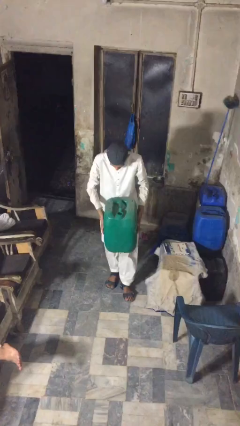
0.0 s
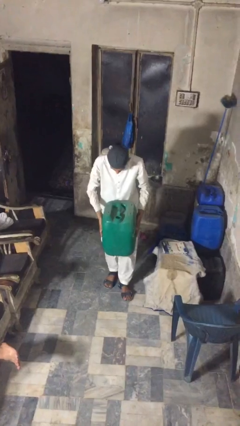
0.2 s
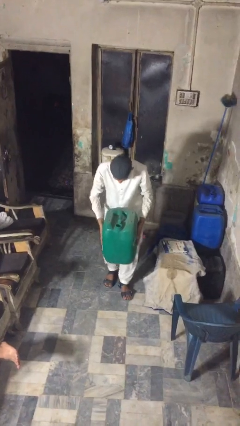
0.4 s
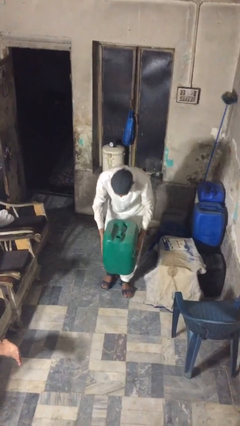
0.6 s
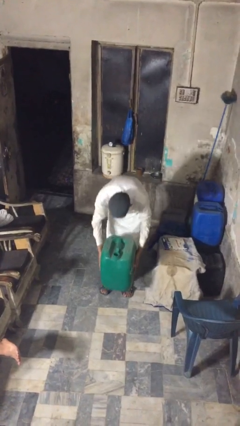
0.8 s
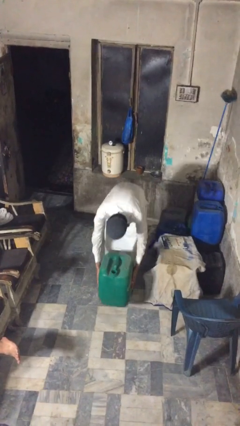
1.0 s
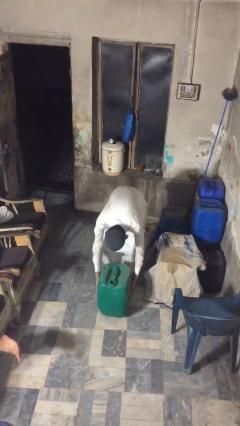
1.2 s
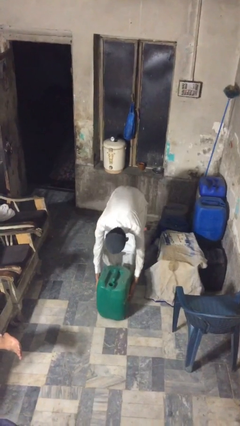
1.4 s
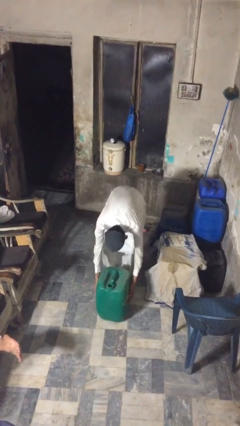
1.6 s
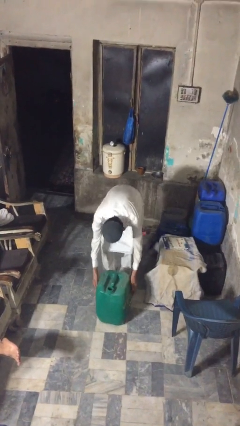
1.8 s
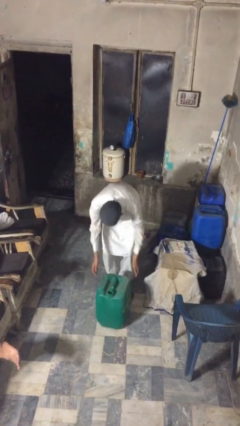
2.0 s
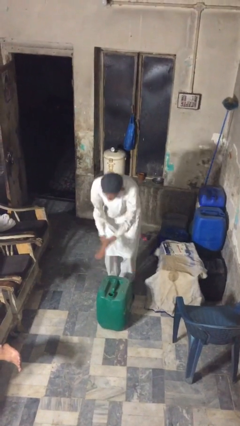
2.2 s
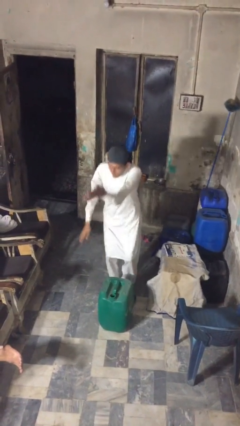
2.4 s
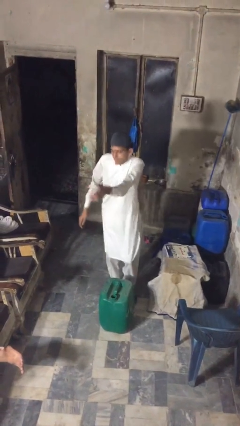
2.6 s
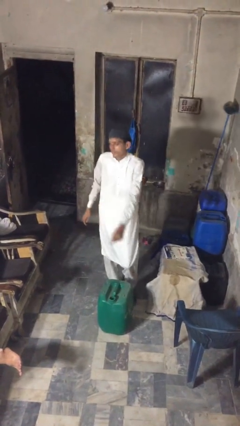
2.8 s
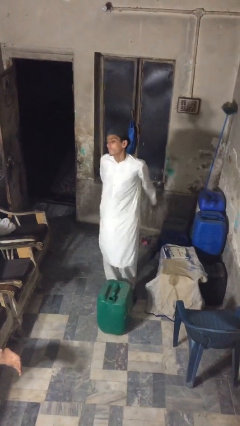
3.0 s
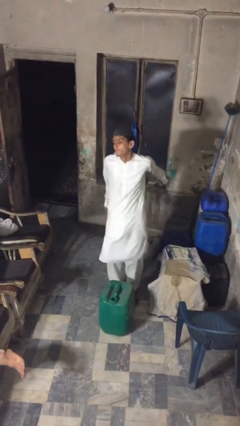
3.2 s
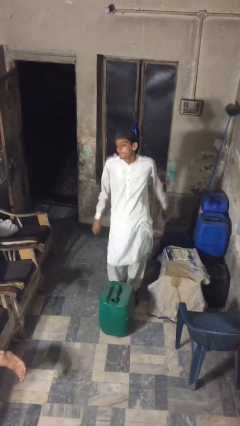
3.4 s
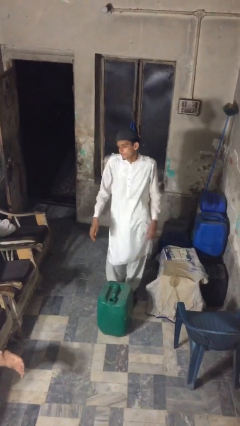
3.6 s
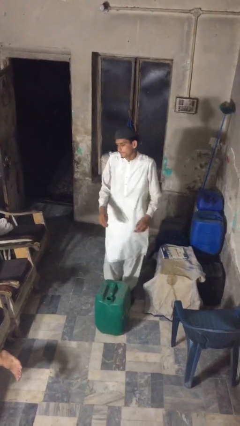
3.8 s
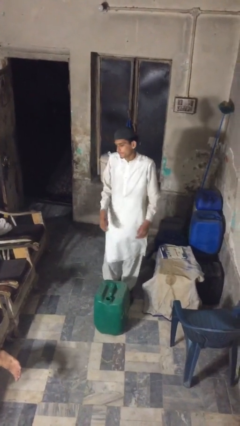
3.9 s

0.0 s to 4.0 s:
person puts down object on floor

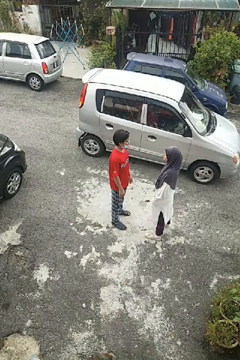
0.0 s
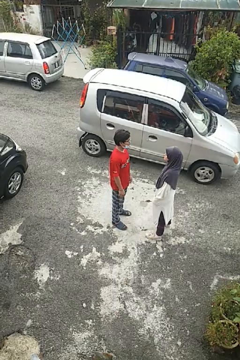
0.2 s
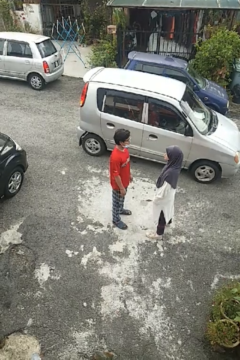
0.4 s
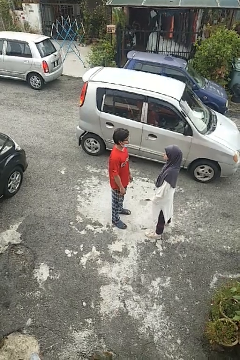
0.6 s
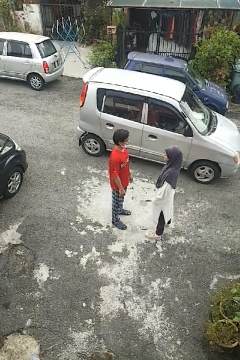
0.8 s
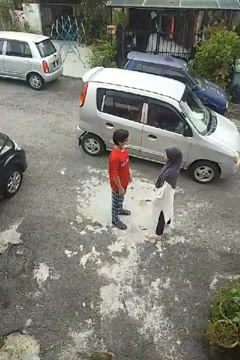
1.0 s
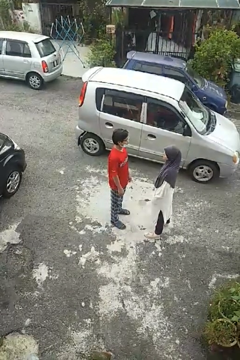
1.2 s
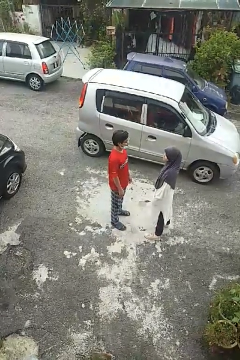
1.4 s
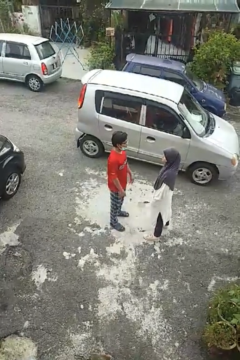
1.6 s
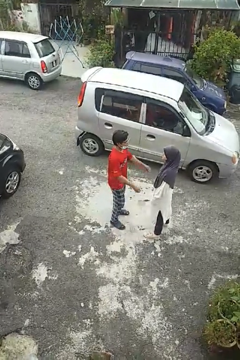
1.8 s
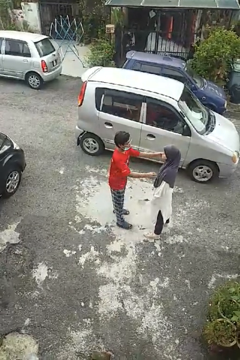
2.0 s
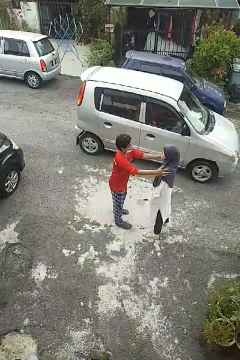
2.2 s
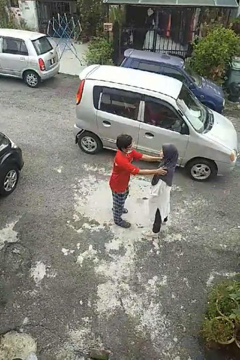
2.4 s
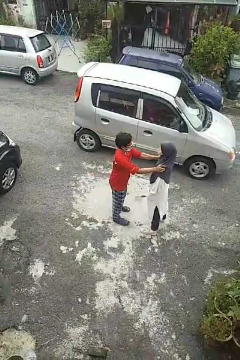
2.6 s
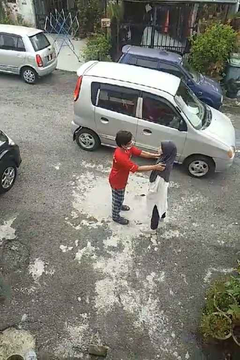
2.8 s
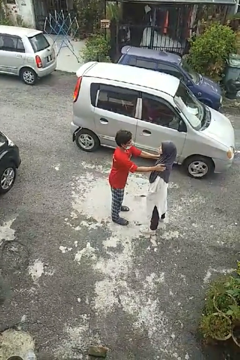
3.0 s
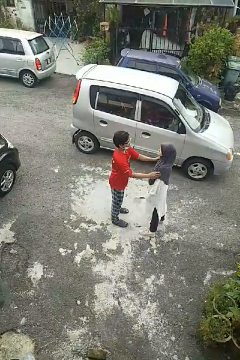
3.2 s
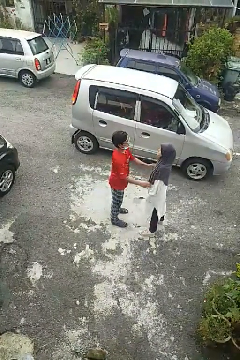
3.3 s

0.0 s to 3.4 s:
person pounds shoulders of person

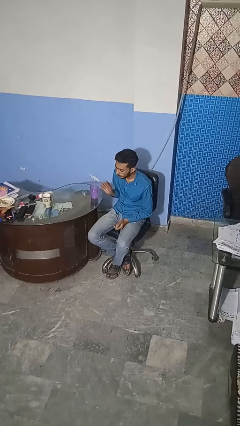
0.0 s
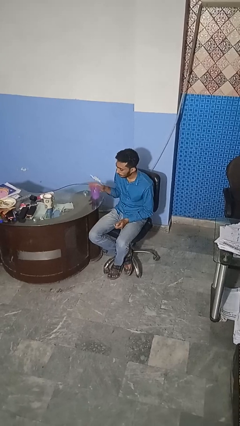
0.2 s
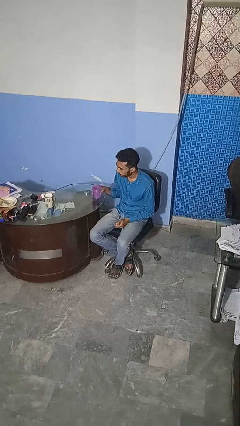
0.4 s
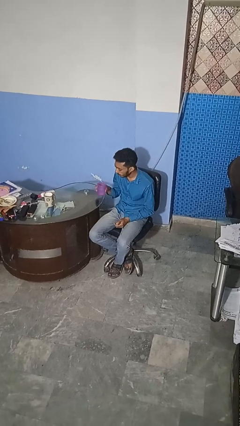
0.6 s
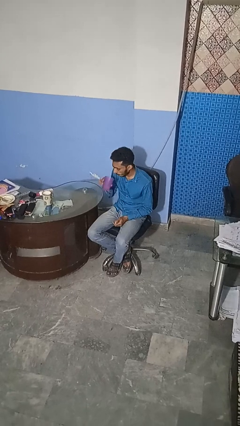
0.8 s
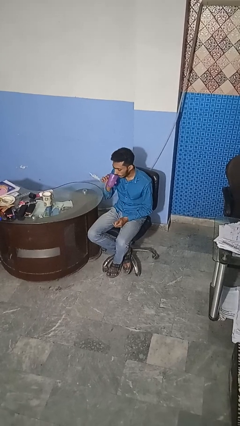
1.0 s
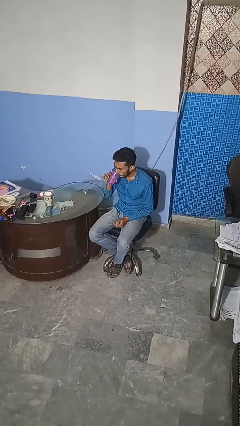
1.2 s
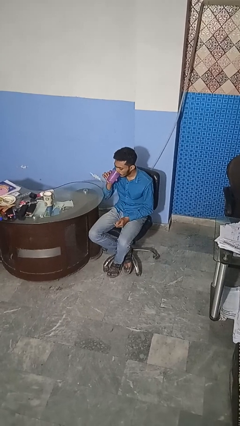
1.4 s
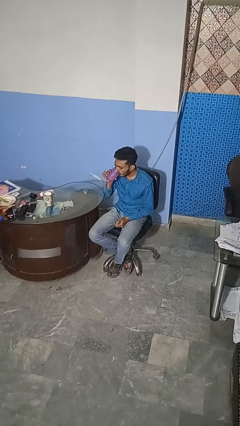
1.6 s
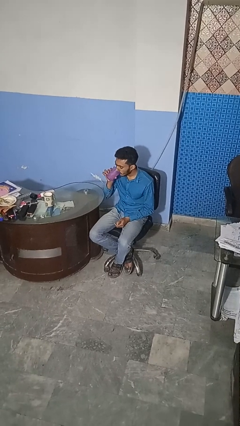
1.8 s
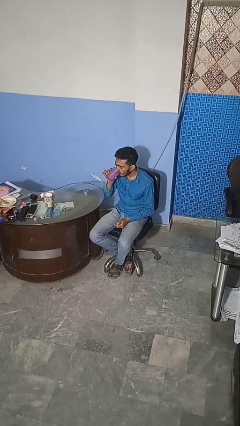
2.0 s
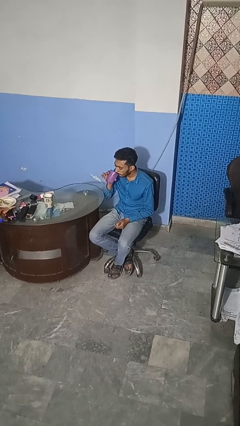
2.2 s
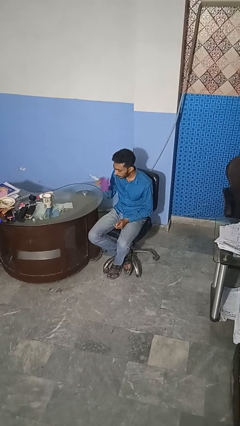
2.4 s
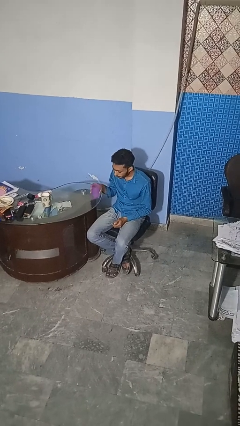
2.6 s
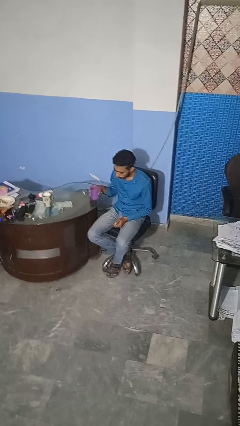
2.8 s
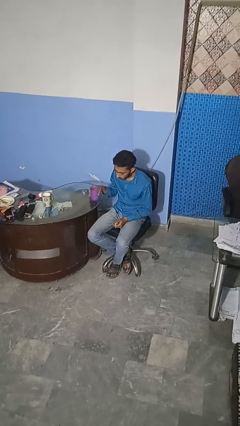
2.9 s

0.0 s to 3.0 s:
person drinks from cup

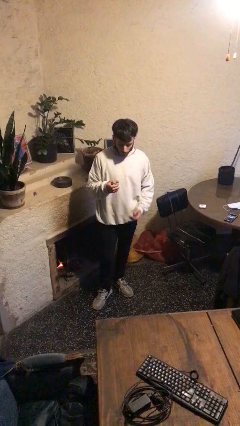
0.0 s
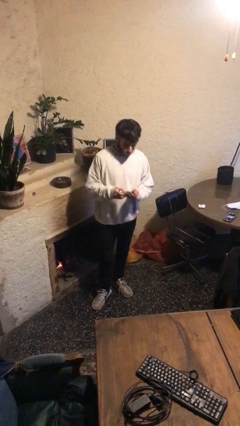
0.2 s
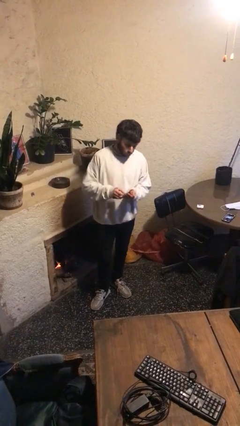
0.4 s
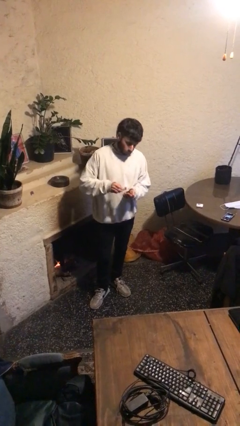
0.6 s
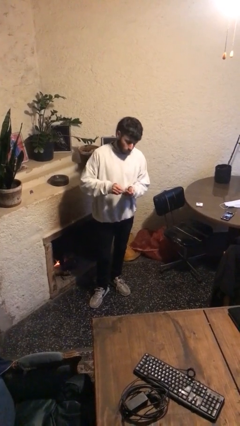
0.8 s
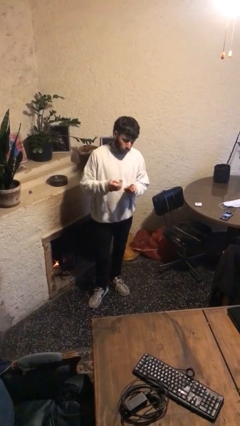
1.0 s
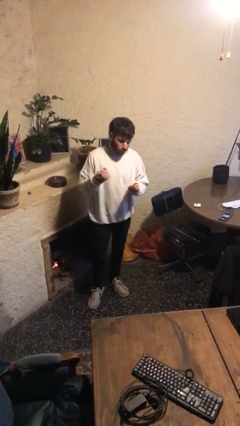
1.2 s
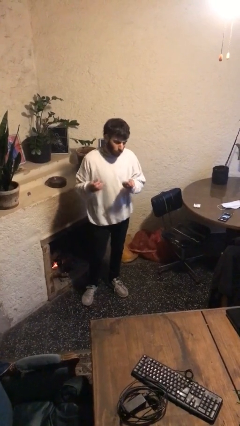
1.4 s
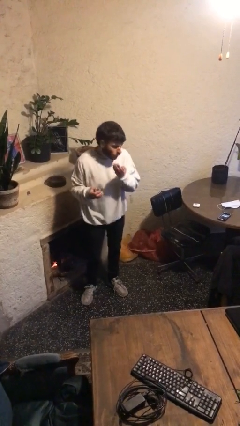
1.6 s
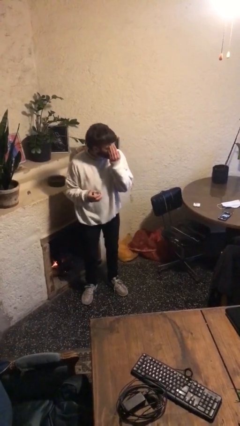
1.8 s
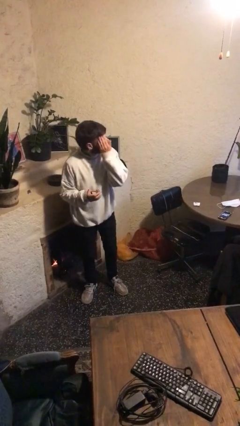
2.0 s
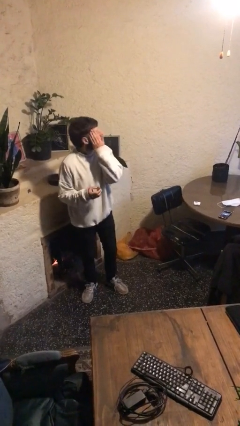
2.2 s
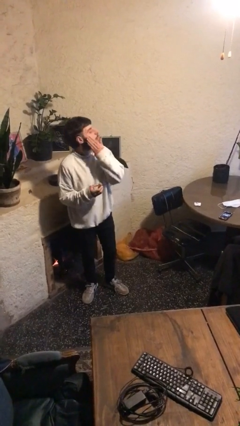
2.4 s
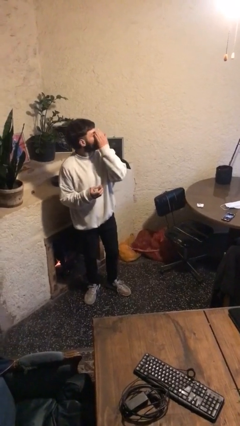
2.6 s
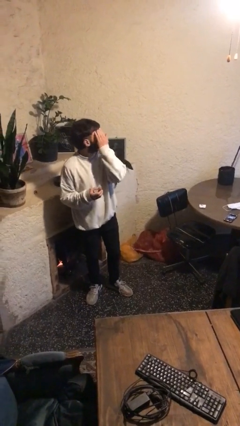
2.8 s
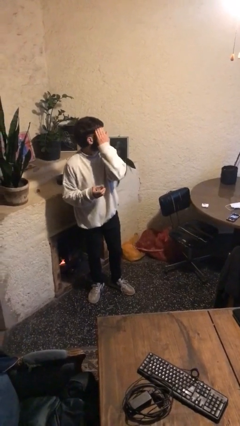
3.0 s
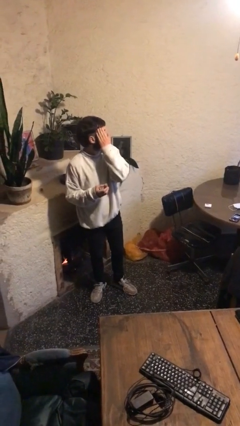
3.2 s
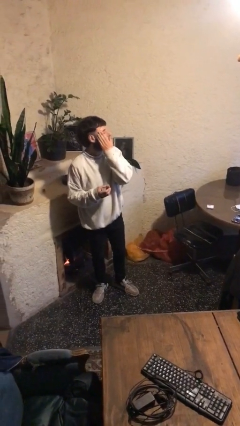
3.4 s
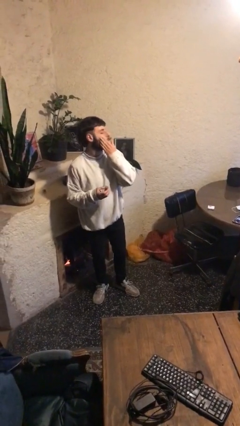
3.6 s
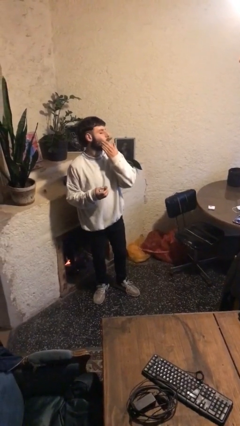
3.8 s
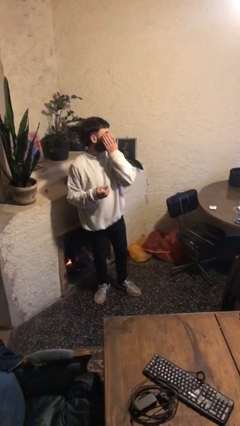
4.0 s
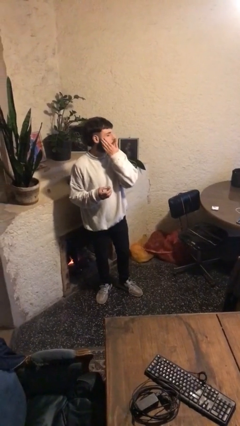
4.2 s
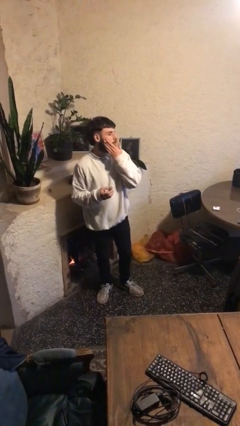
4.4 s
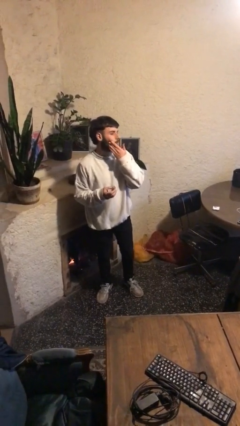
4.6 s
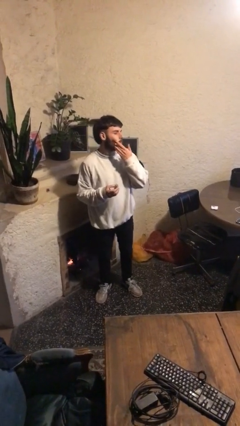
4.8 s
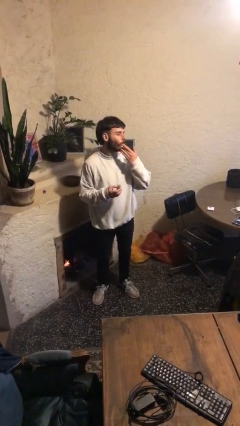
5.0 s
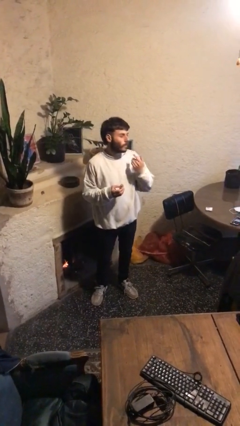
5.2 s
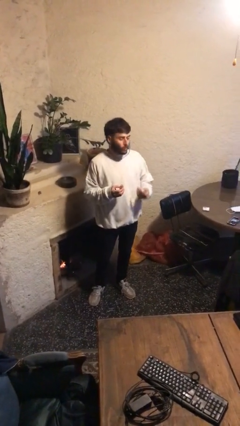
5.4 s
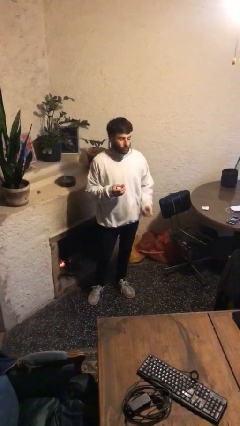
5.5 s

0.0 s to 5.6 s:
person applies facial moisturizer

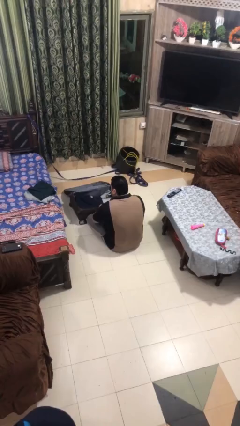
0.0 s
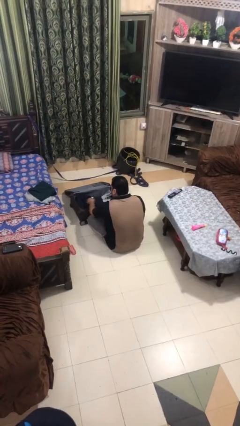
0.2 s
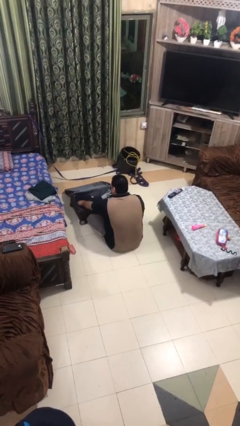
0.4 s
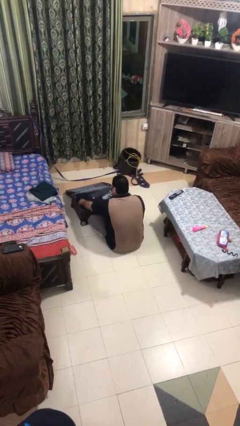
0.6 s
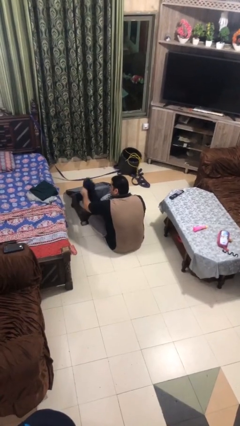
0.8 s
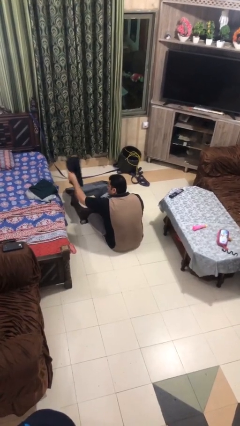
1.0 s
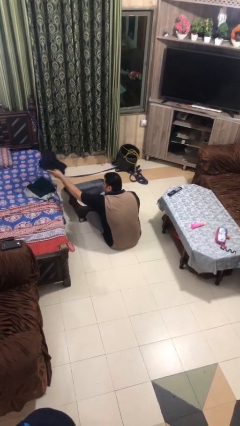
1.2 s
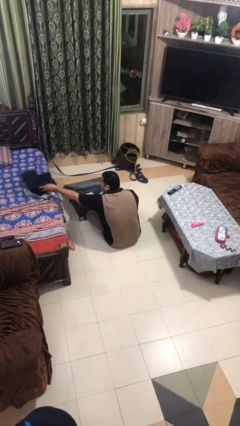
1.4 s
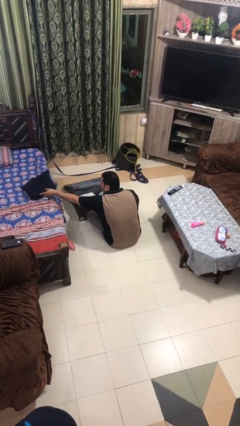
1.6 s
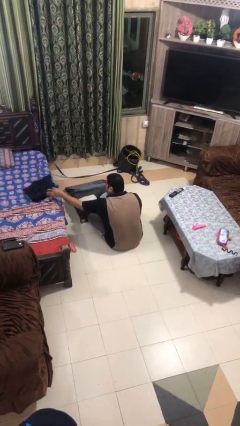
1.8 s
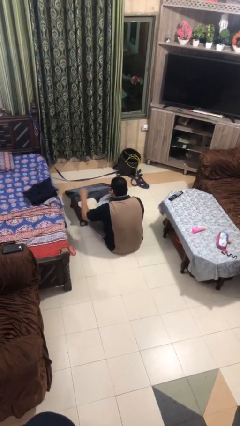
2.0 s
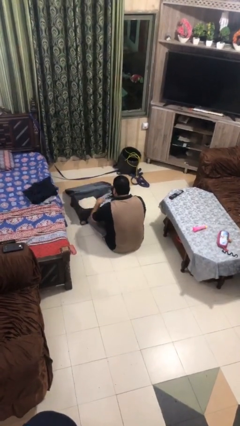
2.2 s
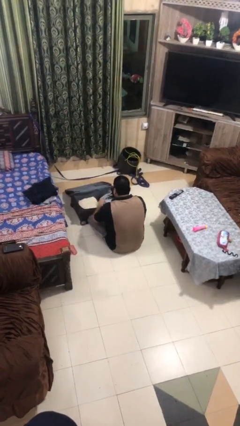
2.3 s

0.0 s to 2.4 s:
person unloads clothes from suitcase

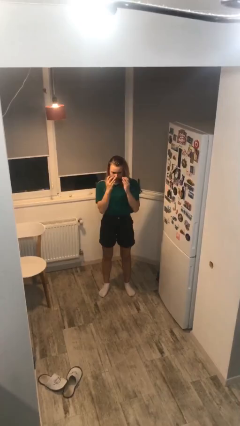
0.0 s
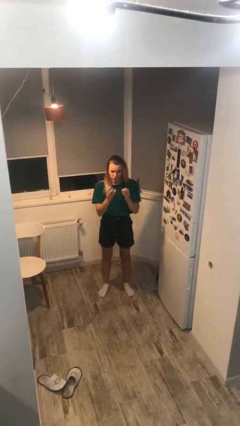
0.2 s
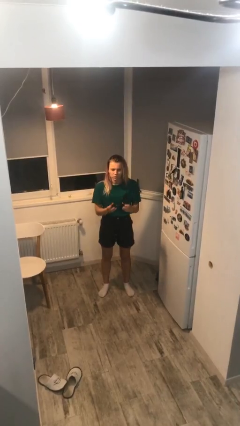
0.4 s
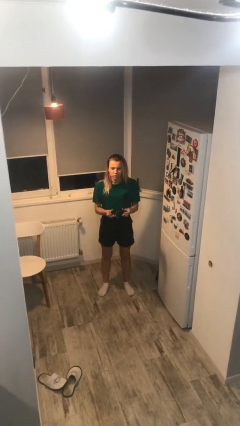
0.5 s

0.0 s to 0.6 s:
person takes off glasses
